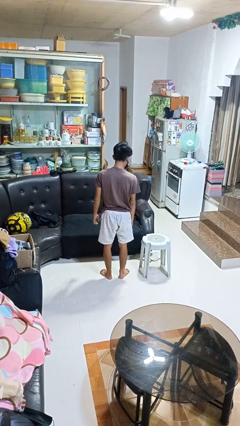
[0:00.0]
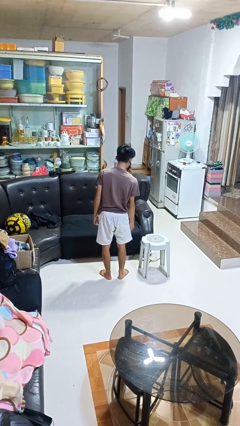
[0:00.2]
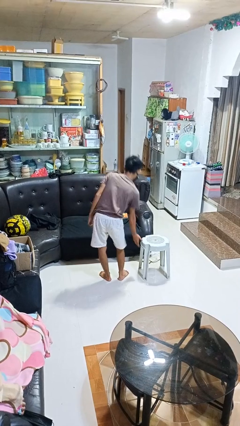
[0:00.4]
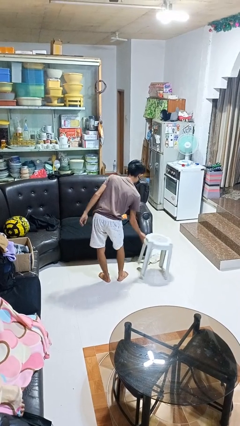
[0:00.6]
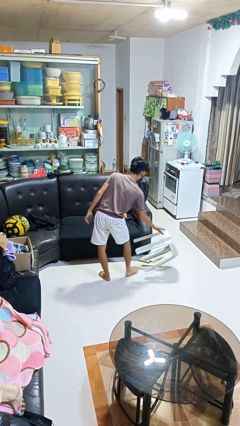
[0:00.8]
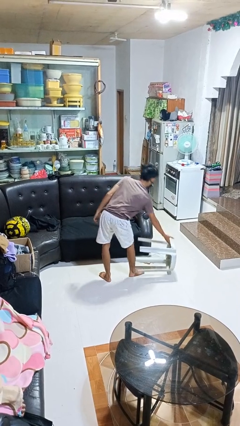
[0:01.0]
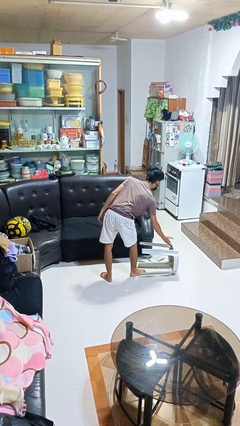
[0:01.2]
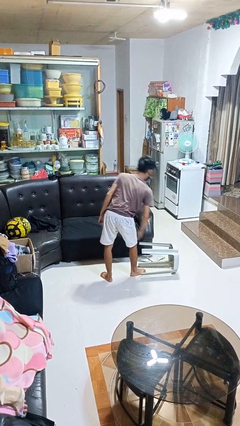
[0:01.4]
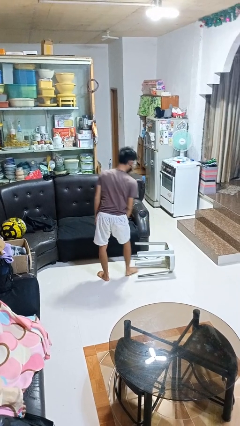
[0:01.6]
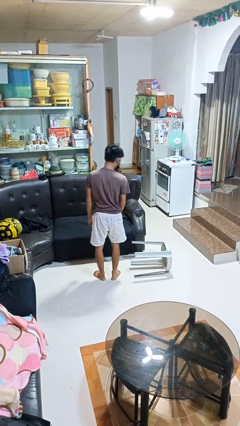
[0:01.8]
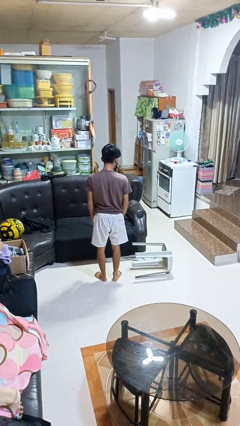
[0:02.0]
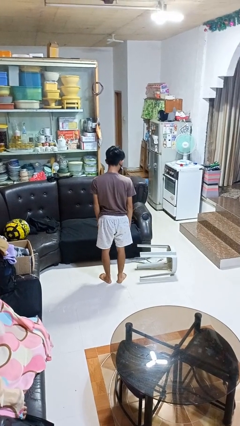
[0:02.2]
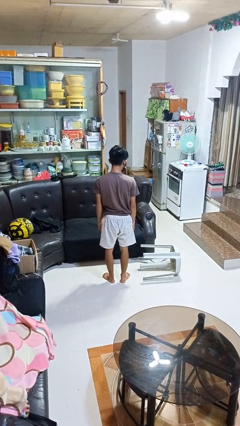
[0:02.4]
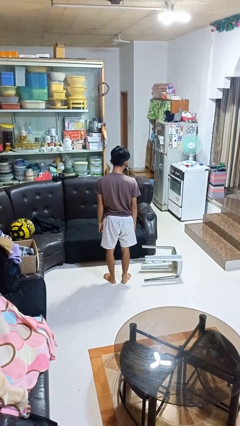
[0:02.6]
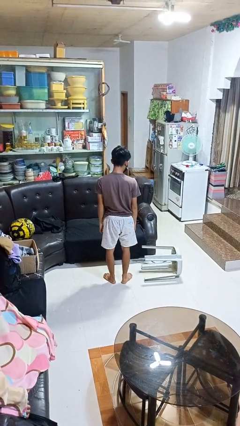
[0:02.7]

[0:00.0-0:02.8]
person knocks over furniture

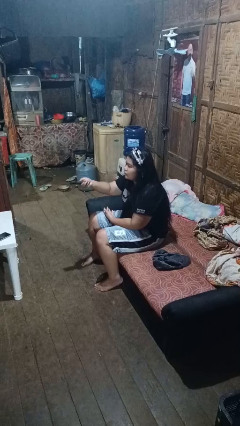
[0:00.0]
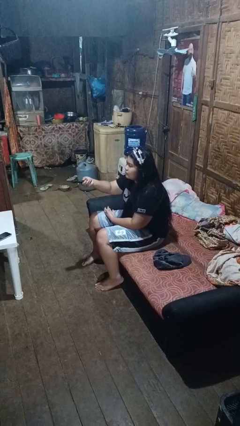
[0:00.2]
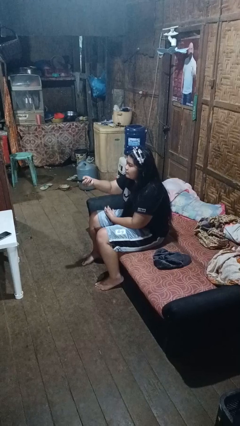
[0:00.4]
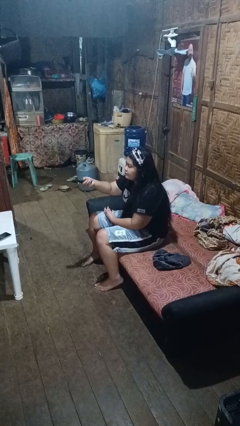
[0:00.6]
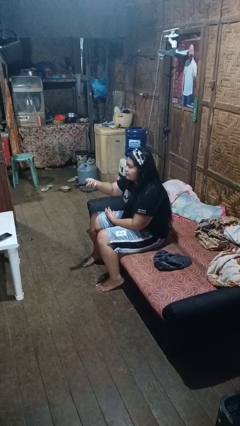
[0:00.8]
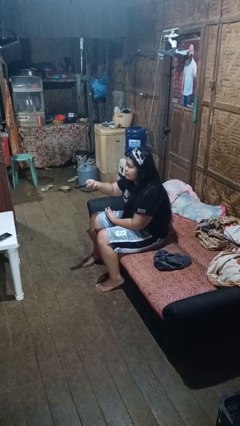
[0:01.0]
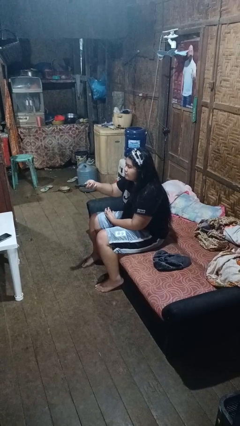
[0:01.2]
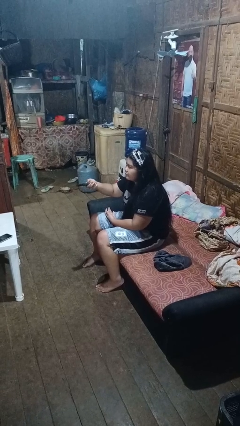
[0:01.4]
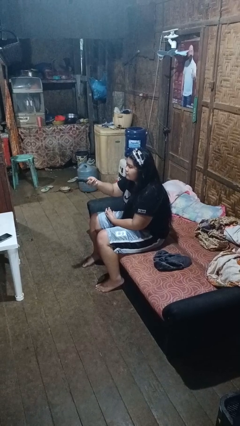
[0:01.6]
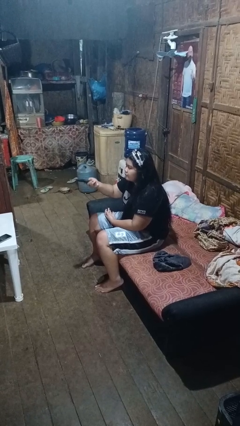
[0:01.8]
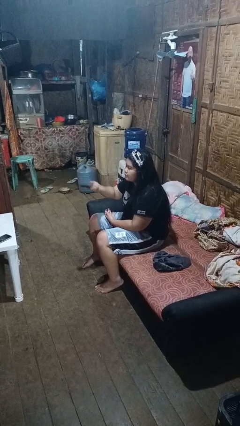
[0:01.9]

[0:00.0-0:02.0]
person uses television remote

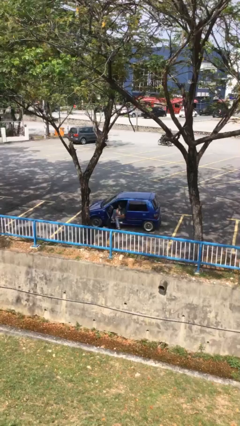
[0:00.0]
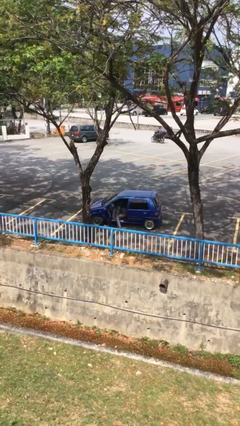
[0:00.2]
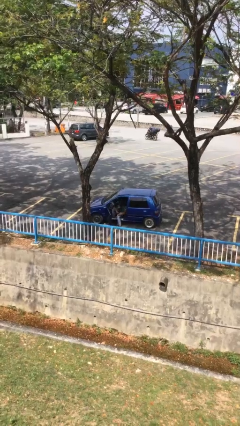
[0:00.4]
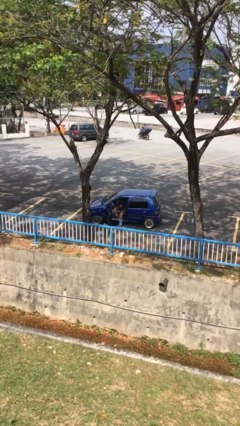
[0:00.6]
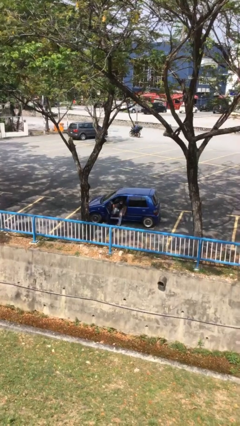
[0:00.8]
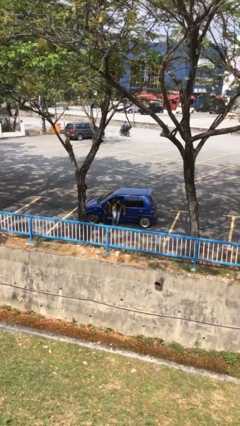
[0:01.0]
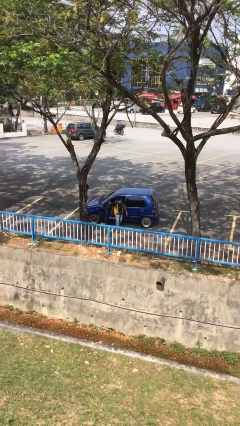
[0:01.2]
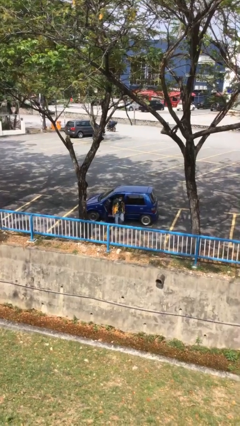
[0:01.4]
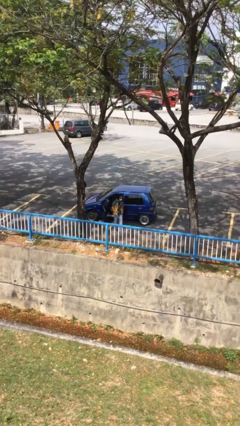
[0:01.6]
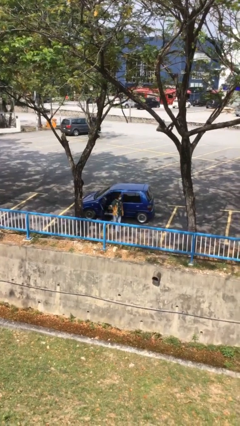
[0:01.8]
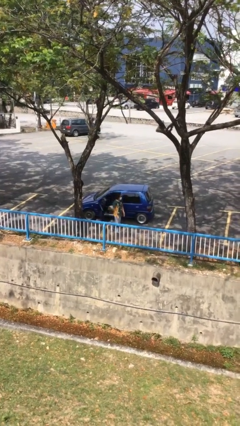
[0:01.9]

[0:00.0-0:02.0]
person exits car

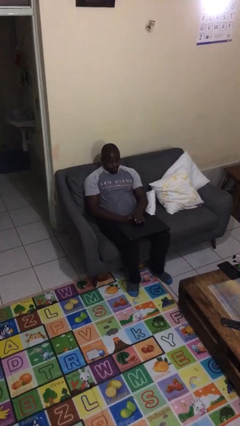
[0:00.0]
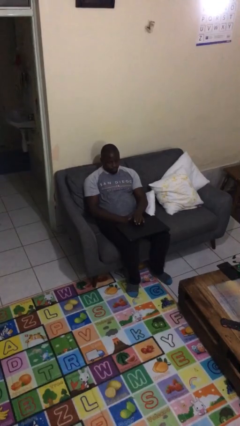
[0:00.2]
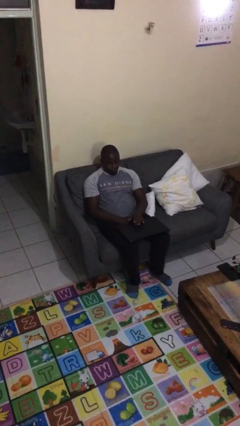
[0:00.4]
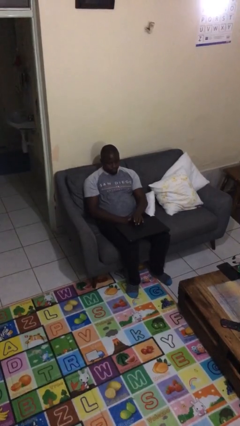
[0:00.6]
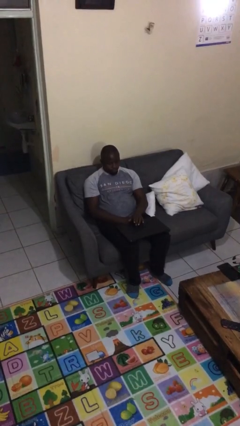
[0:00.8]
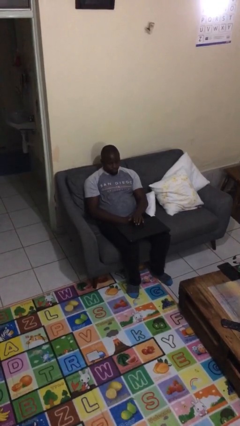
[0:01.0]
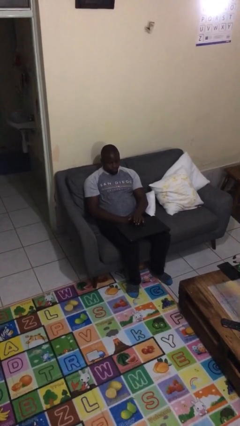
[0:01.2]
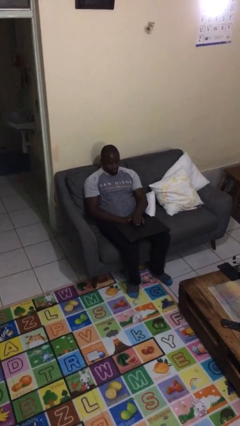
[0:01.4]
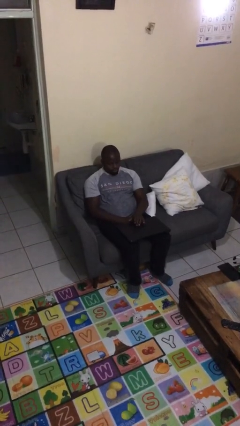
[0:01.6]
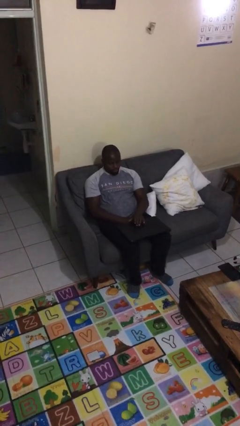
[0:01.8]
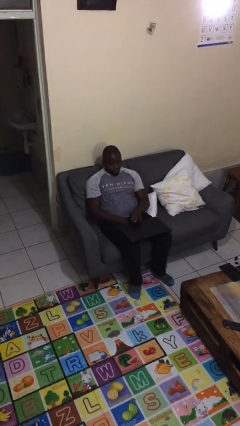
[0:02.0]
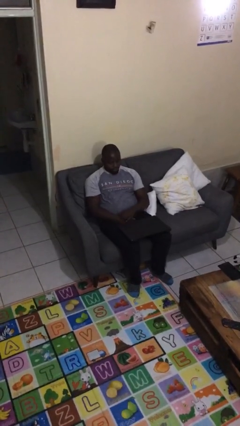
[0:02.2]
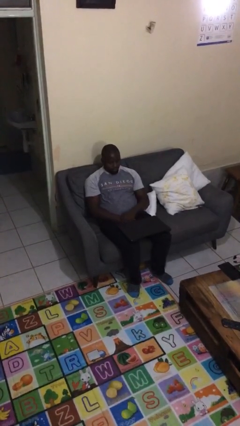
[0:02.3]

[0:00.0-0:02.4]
person taps object with finger

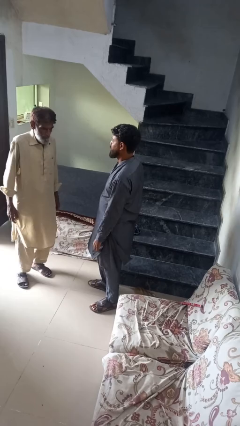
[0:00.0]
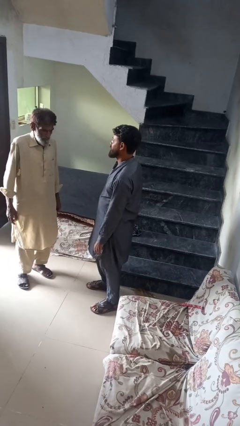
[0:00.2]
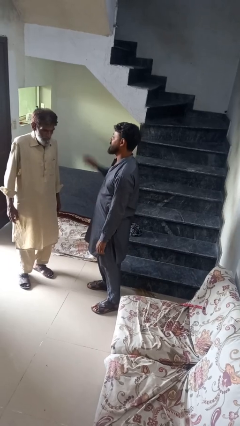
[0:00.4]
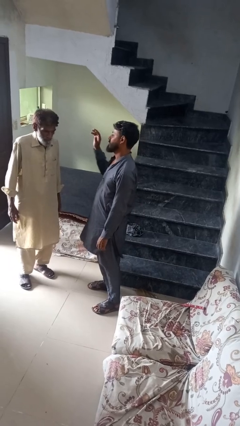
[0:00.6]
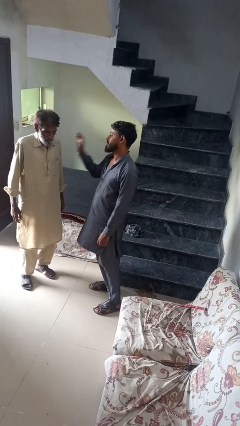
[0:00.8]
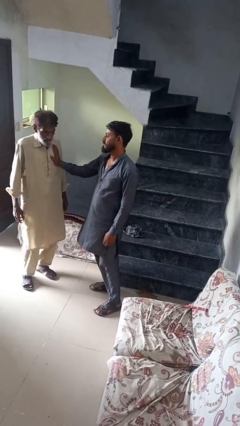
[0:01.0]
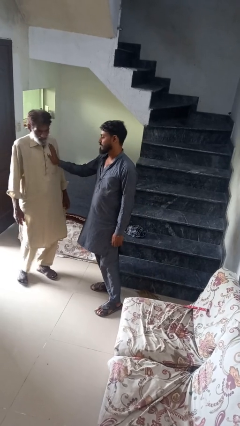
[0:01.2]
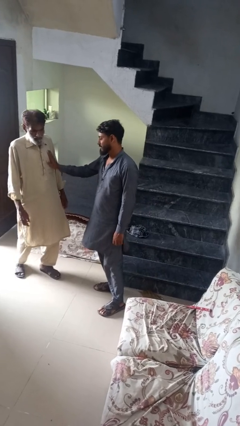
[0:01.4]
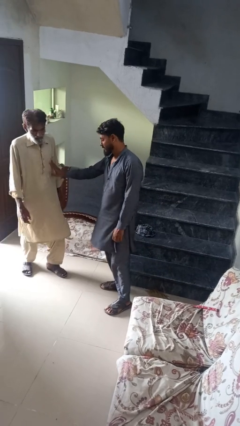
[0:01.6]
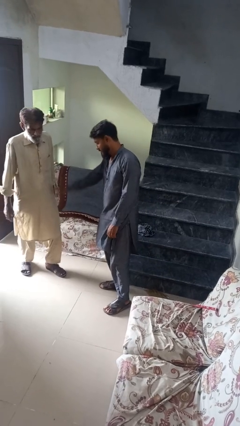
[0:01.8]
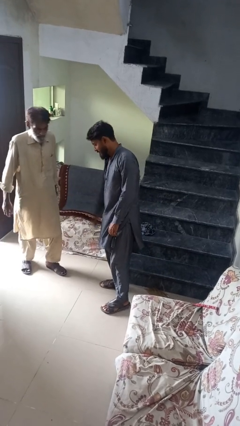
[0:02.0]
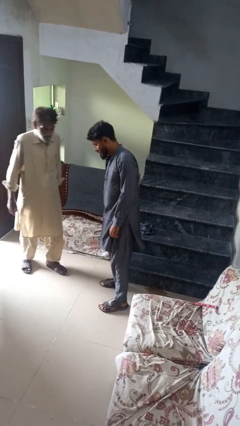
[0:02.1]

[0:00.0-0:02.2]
person shoves person

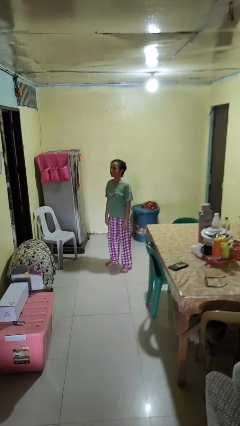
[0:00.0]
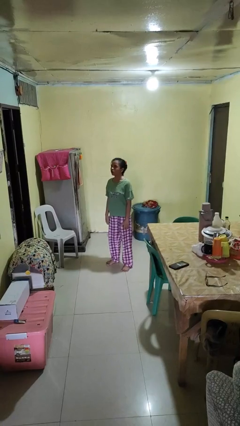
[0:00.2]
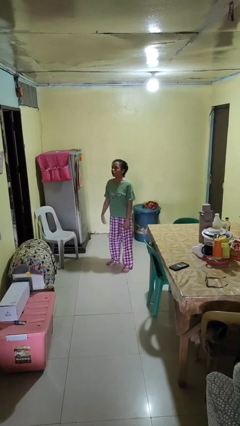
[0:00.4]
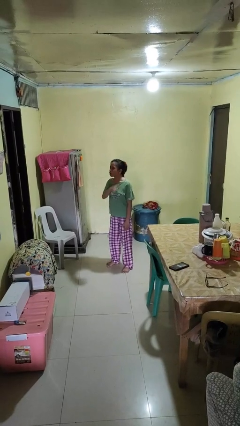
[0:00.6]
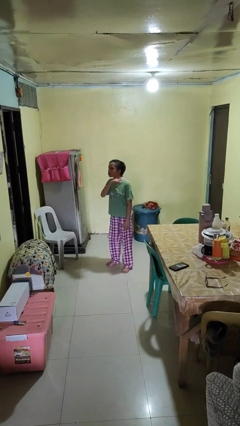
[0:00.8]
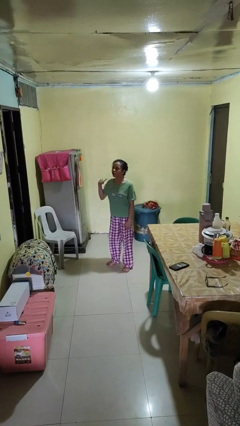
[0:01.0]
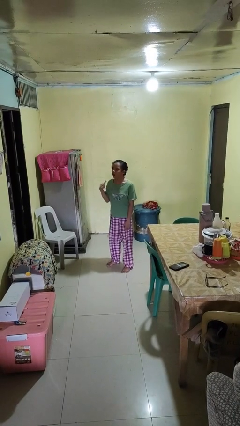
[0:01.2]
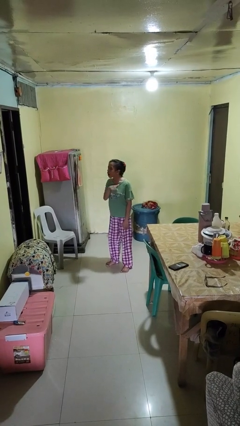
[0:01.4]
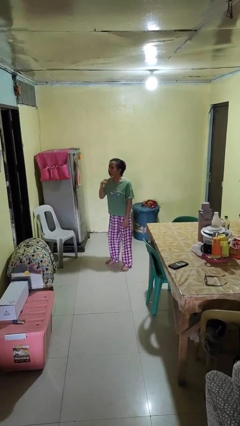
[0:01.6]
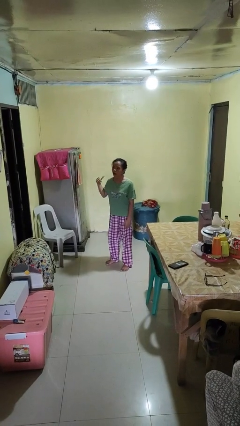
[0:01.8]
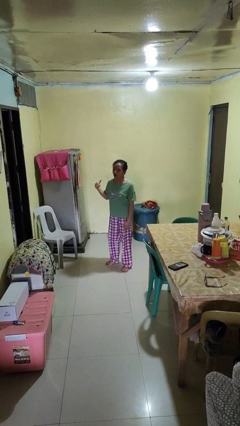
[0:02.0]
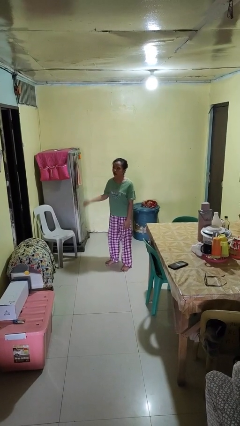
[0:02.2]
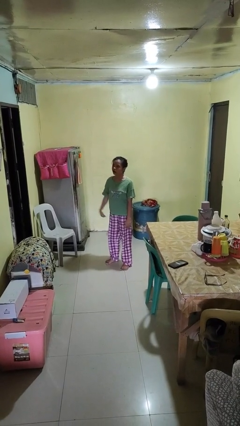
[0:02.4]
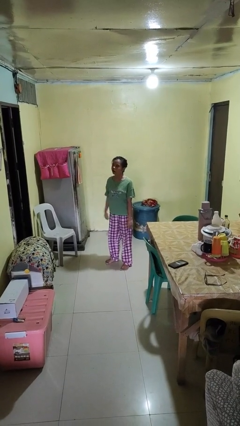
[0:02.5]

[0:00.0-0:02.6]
person gestures cut

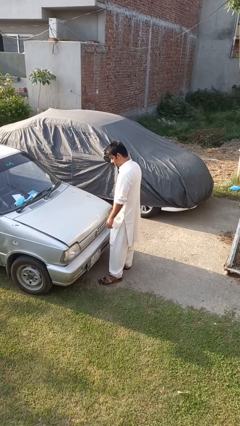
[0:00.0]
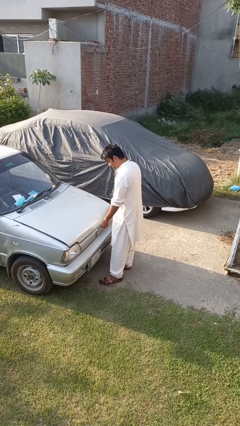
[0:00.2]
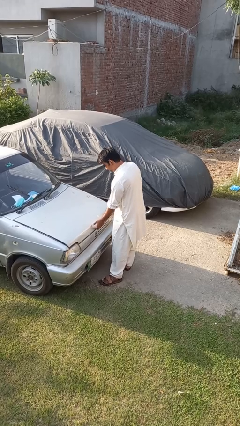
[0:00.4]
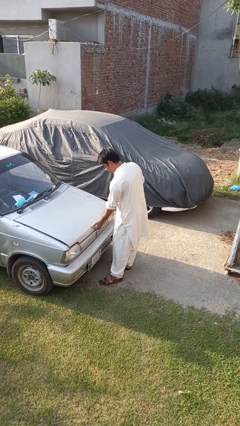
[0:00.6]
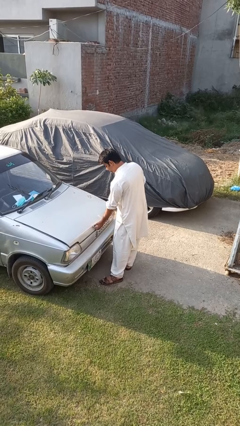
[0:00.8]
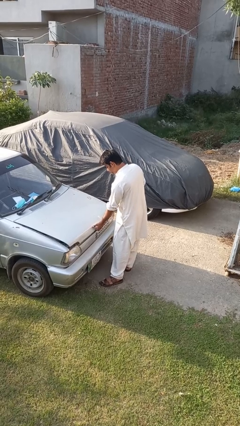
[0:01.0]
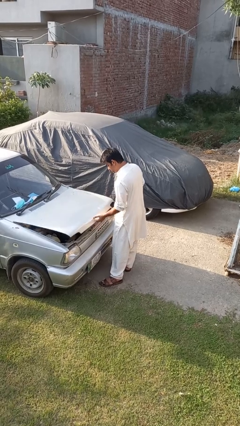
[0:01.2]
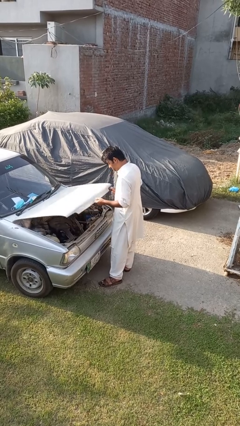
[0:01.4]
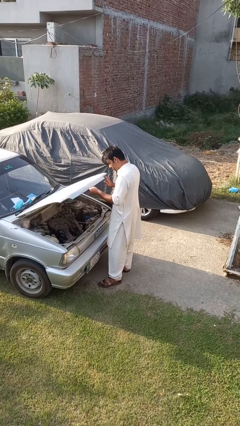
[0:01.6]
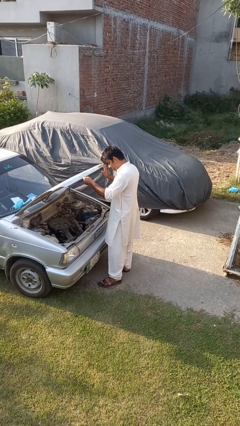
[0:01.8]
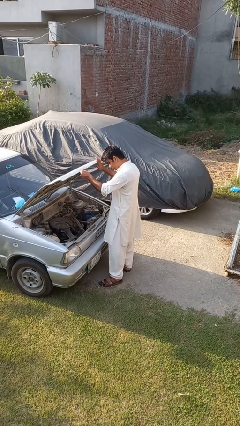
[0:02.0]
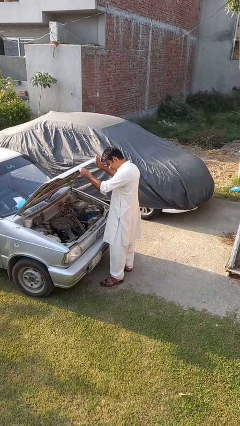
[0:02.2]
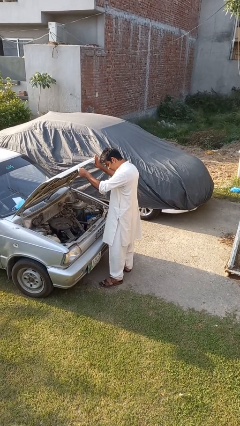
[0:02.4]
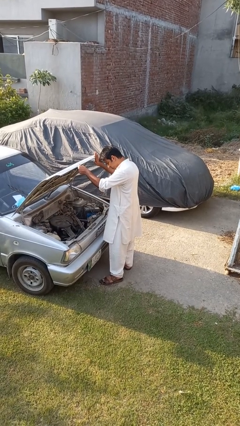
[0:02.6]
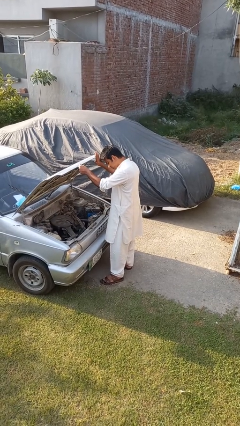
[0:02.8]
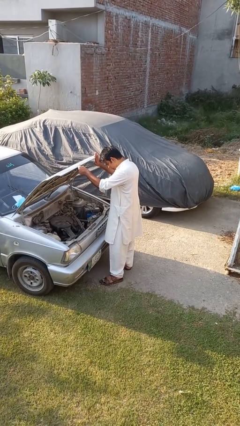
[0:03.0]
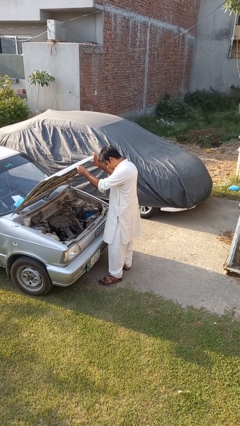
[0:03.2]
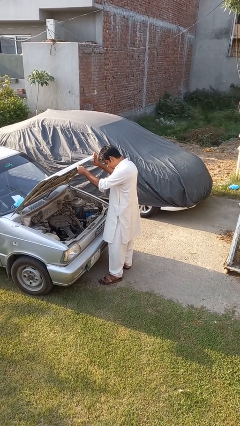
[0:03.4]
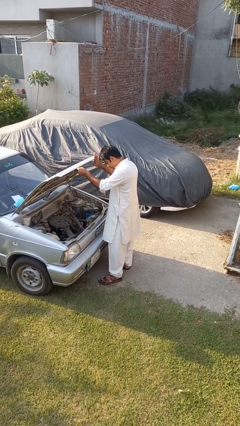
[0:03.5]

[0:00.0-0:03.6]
person opens car hood
